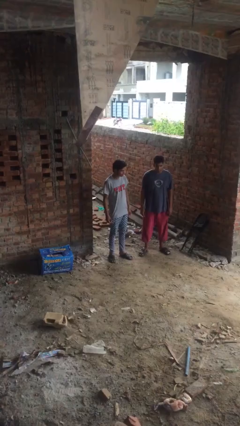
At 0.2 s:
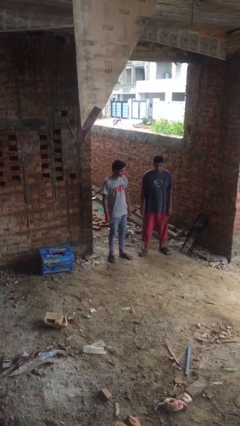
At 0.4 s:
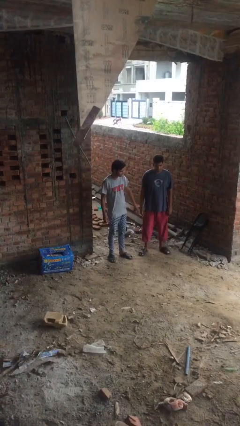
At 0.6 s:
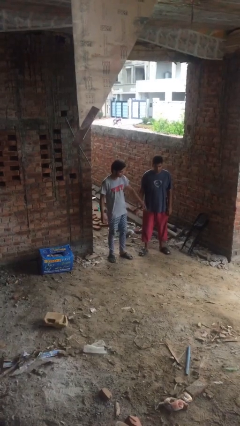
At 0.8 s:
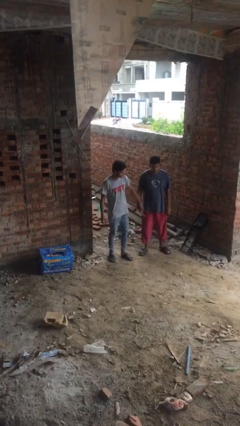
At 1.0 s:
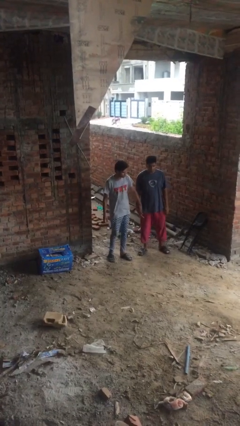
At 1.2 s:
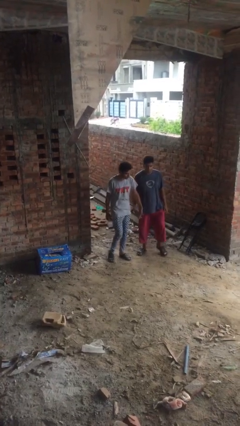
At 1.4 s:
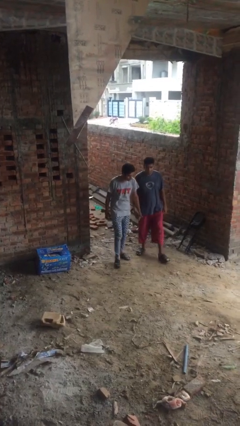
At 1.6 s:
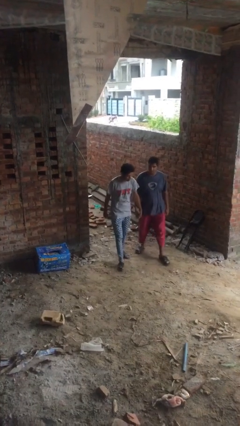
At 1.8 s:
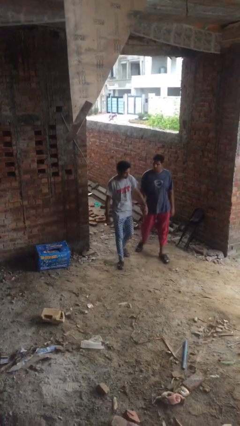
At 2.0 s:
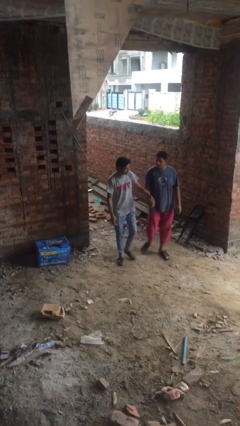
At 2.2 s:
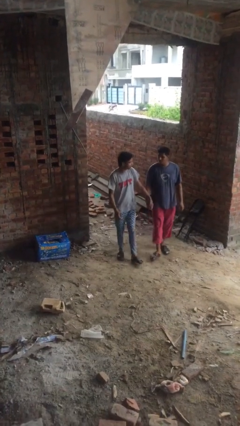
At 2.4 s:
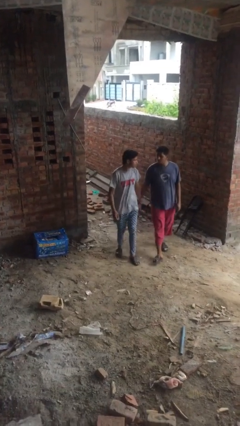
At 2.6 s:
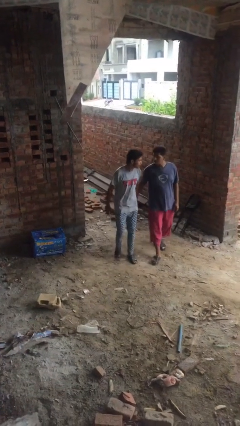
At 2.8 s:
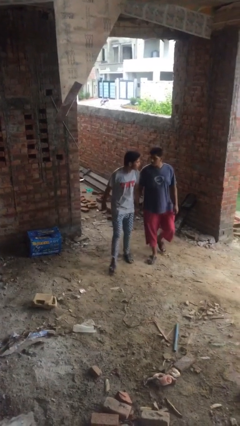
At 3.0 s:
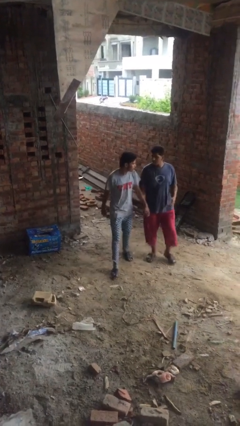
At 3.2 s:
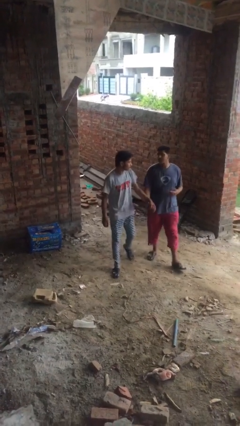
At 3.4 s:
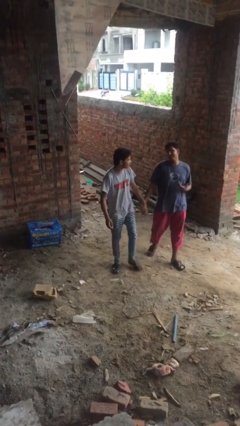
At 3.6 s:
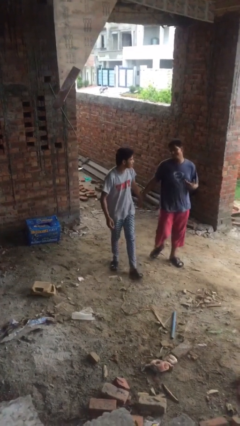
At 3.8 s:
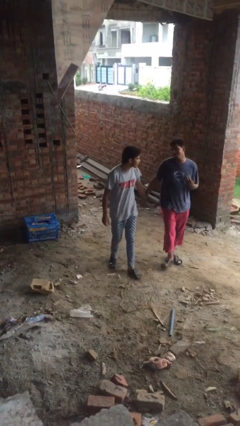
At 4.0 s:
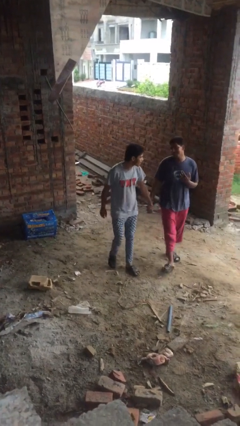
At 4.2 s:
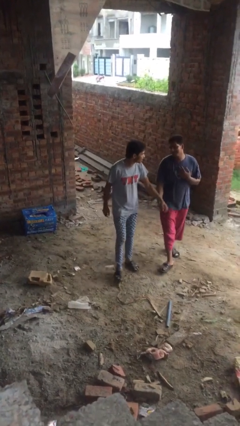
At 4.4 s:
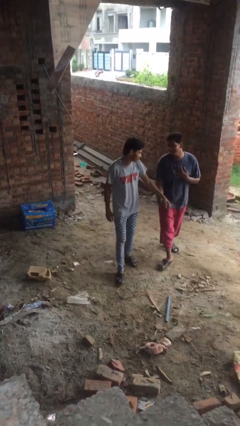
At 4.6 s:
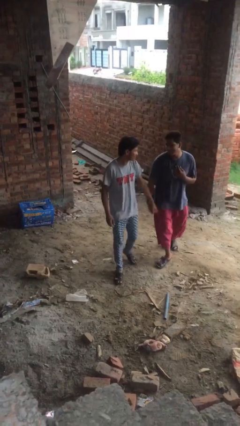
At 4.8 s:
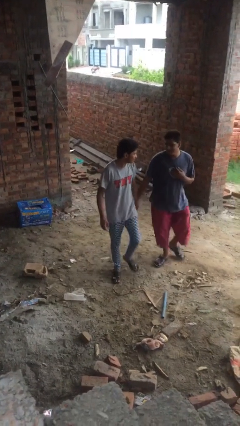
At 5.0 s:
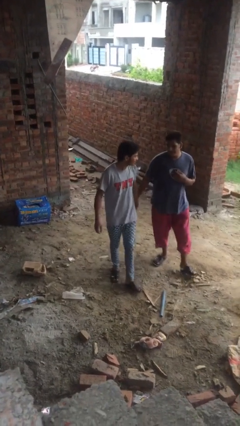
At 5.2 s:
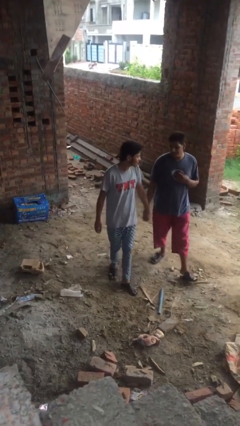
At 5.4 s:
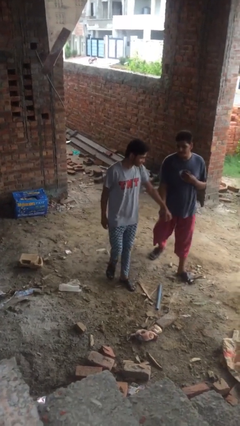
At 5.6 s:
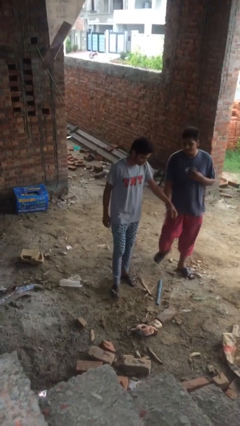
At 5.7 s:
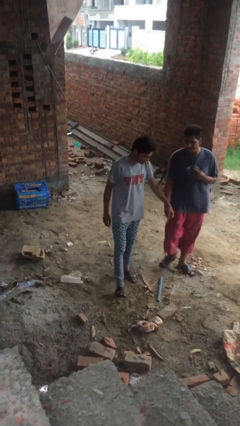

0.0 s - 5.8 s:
person holds hand

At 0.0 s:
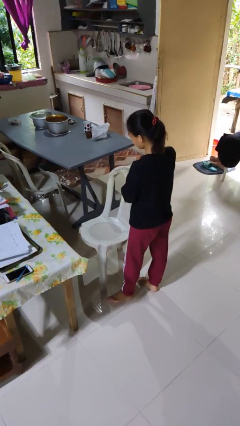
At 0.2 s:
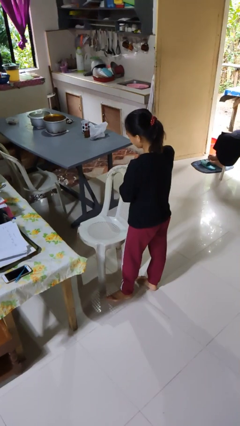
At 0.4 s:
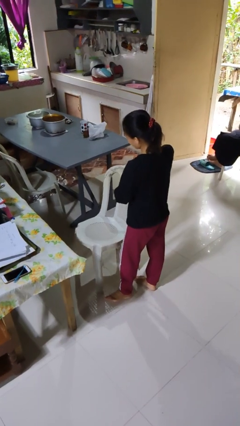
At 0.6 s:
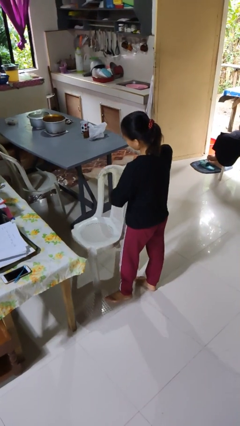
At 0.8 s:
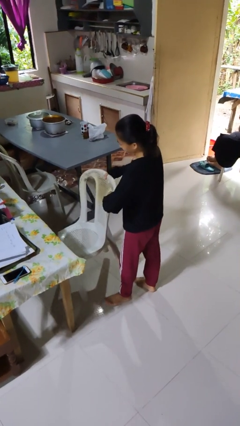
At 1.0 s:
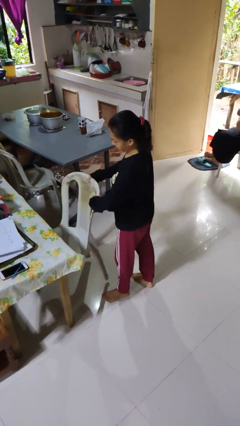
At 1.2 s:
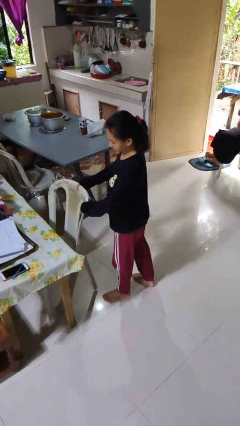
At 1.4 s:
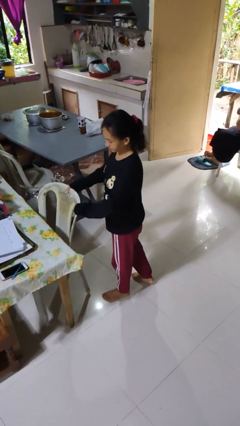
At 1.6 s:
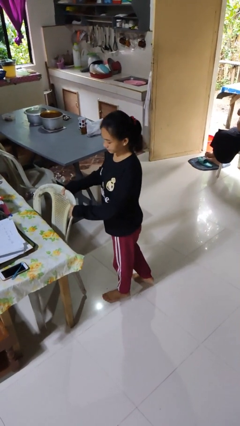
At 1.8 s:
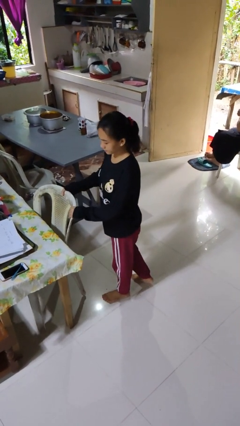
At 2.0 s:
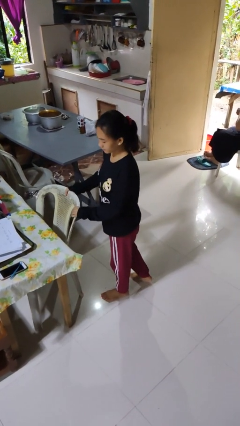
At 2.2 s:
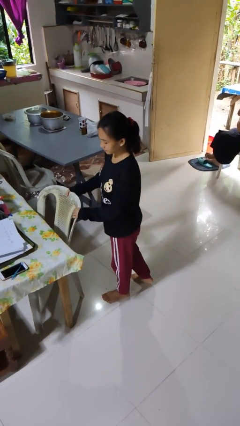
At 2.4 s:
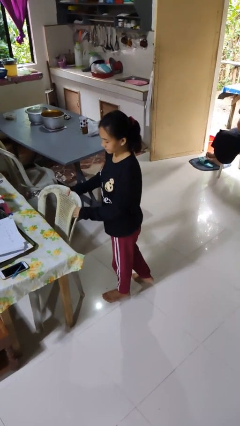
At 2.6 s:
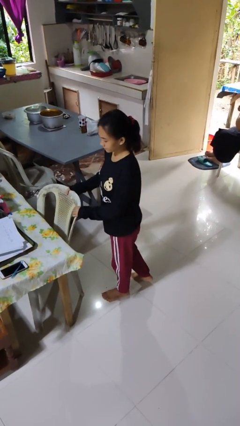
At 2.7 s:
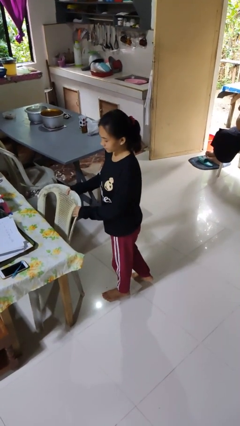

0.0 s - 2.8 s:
person pushes in chair

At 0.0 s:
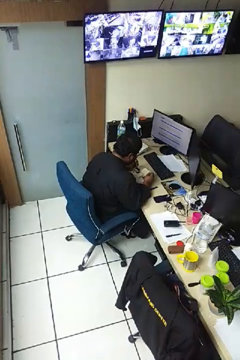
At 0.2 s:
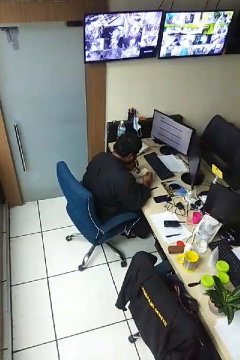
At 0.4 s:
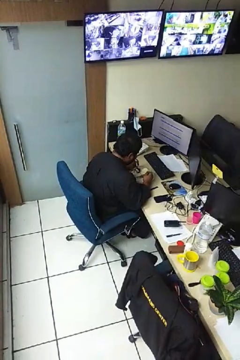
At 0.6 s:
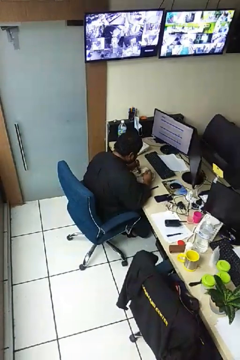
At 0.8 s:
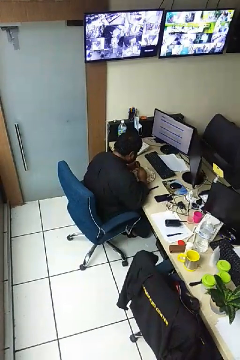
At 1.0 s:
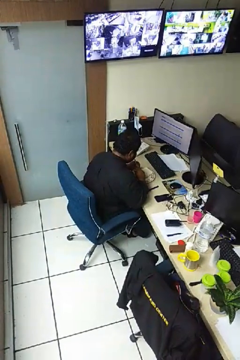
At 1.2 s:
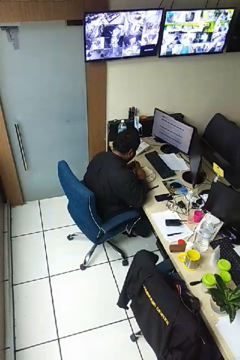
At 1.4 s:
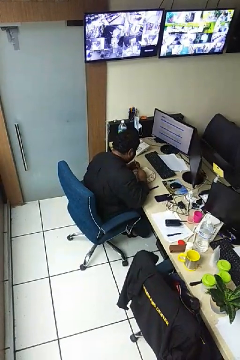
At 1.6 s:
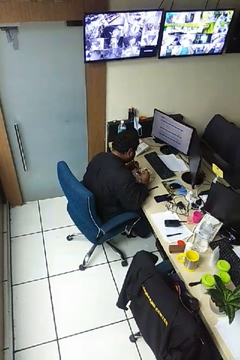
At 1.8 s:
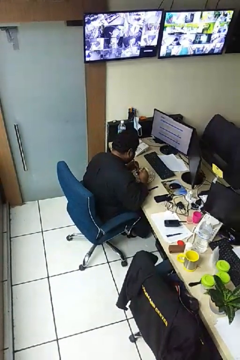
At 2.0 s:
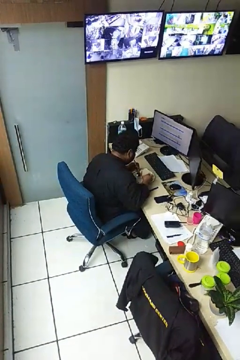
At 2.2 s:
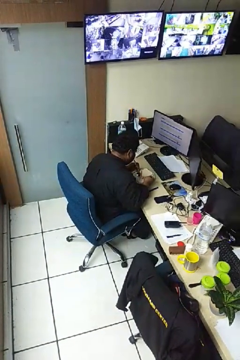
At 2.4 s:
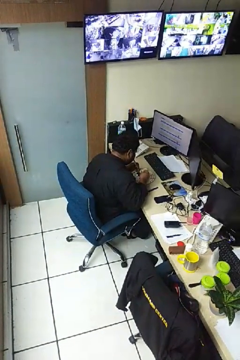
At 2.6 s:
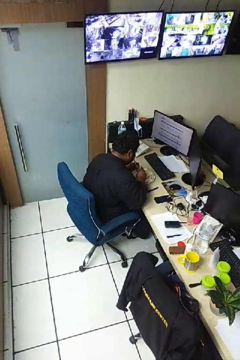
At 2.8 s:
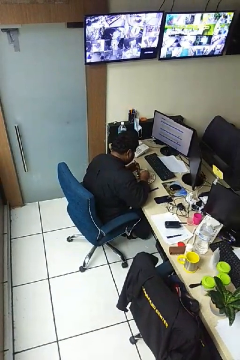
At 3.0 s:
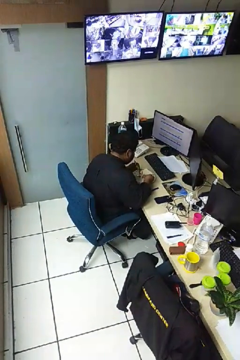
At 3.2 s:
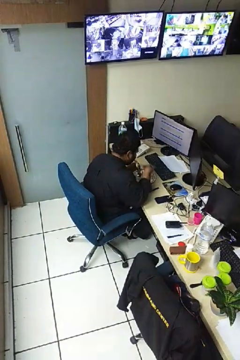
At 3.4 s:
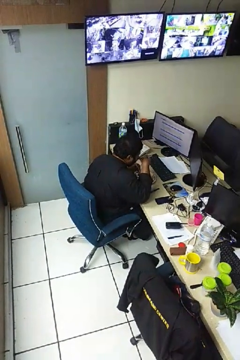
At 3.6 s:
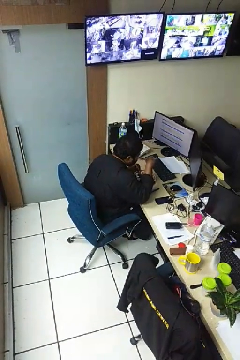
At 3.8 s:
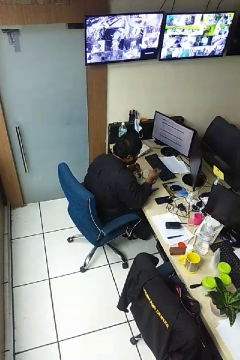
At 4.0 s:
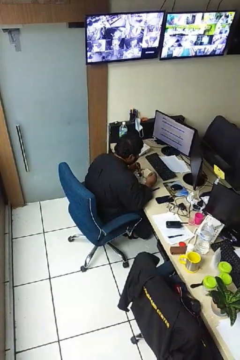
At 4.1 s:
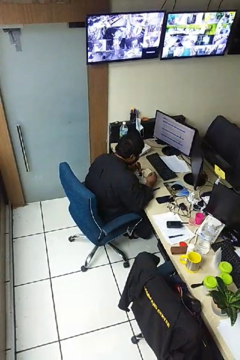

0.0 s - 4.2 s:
person eats with utensil

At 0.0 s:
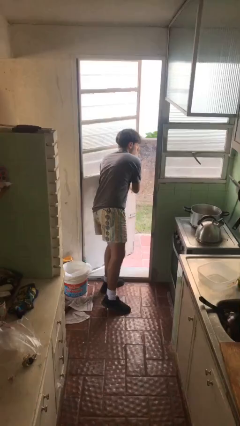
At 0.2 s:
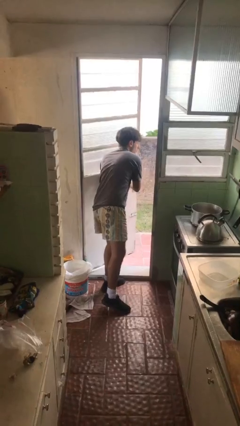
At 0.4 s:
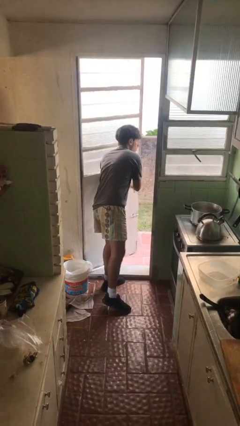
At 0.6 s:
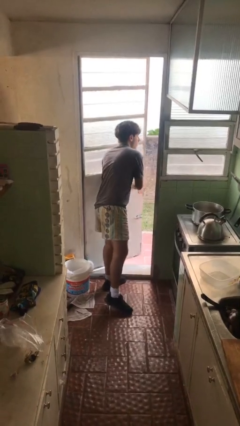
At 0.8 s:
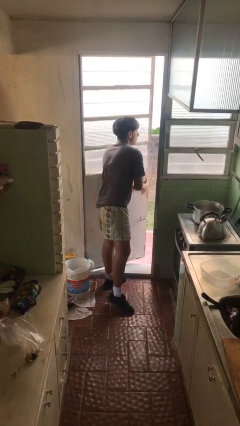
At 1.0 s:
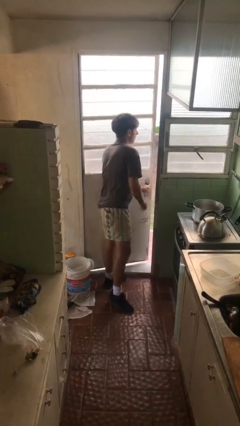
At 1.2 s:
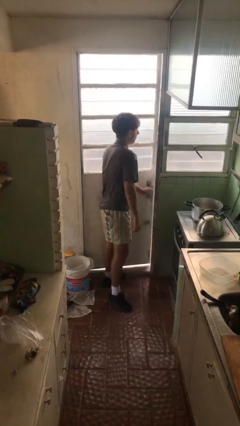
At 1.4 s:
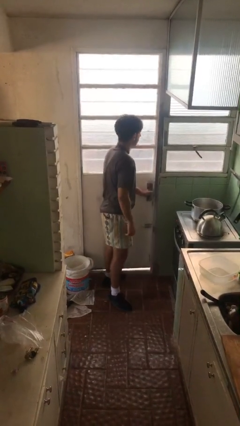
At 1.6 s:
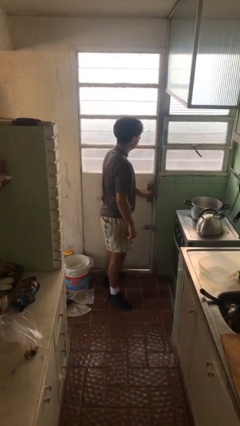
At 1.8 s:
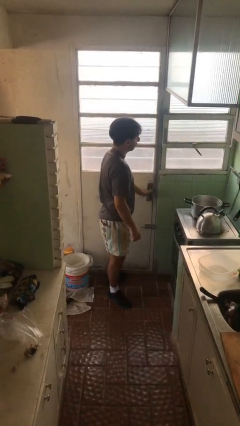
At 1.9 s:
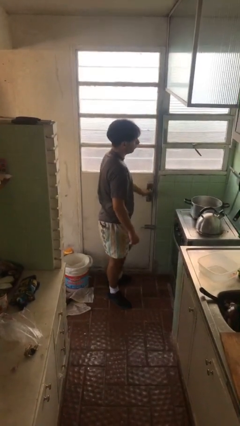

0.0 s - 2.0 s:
person closes facility door

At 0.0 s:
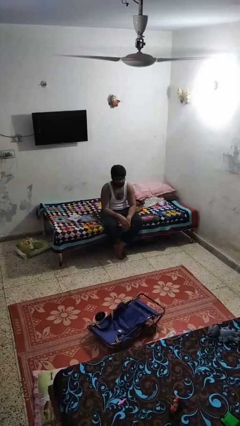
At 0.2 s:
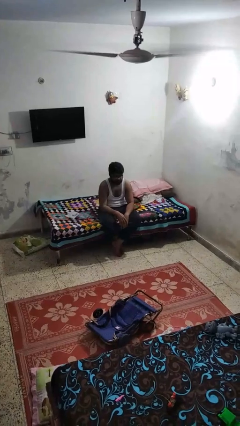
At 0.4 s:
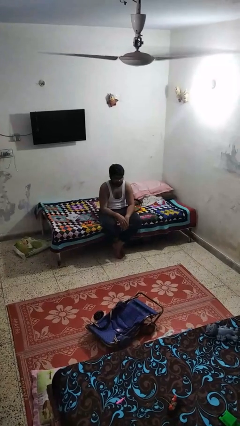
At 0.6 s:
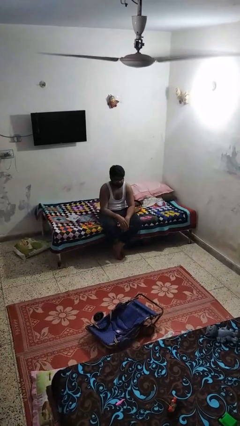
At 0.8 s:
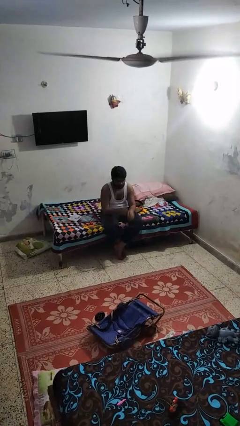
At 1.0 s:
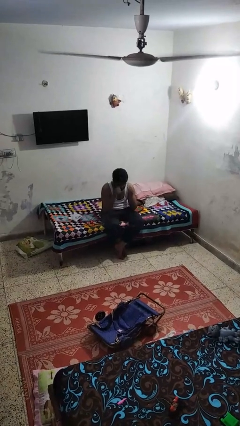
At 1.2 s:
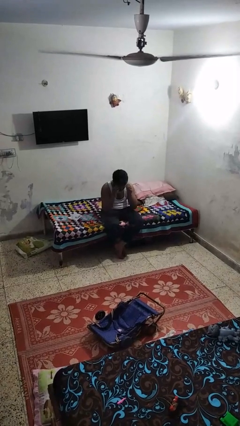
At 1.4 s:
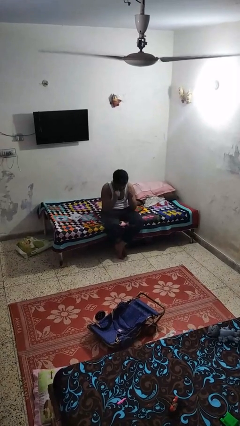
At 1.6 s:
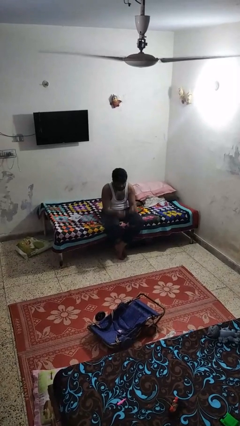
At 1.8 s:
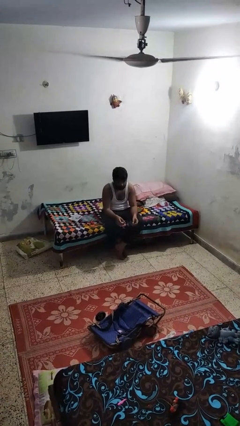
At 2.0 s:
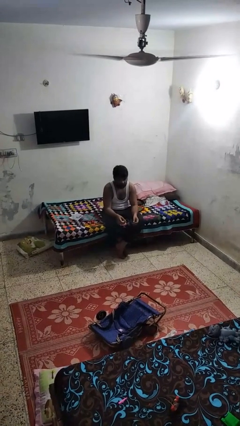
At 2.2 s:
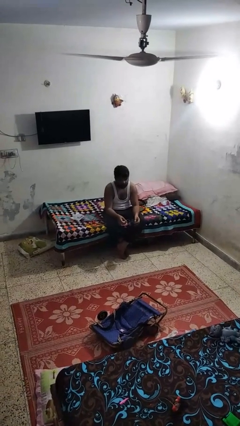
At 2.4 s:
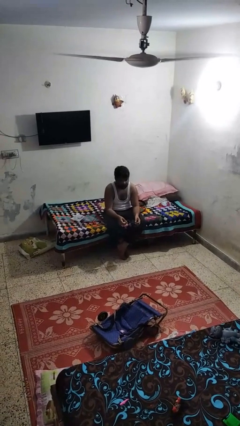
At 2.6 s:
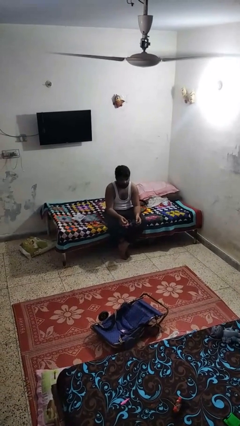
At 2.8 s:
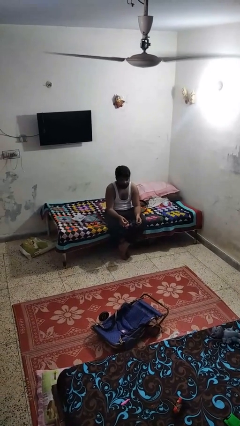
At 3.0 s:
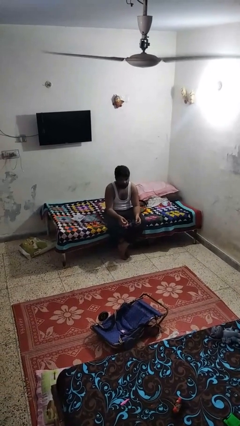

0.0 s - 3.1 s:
person takes off glasses

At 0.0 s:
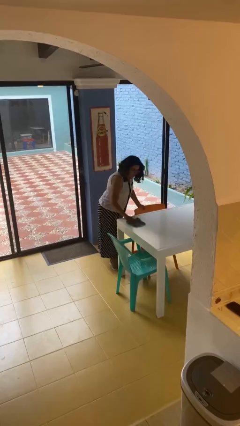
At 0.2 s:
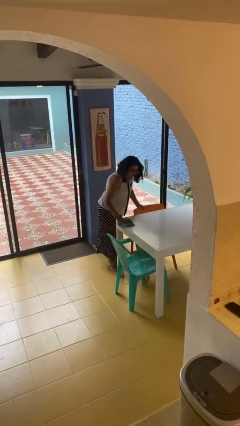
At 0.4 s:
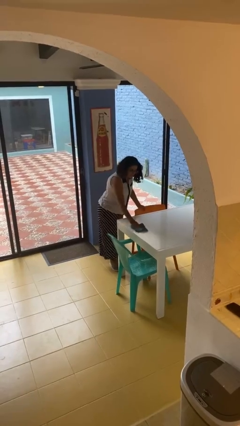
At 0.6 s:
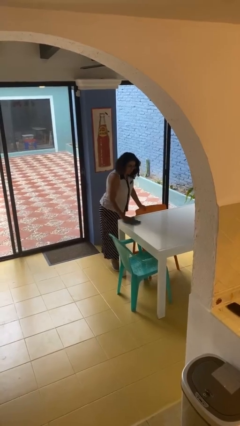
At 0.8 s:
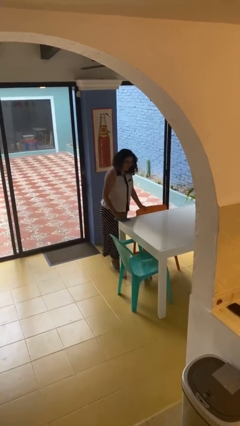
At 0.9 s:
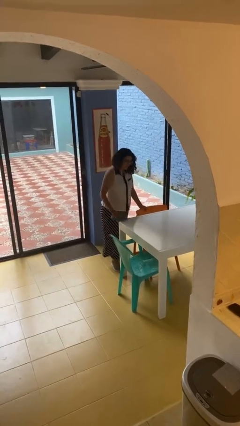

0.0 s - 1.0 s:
person cleans table with rag
